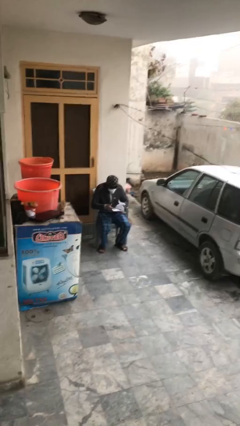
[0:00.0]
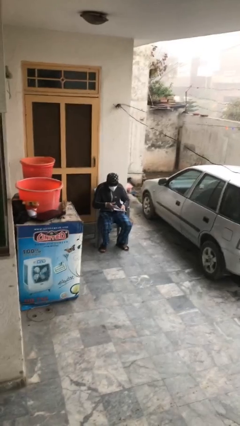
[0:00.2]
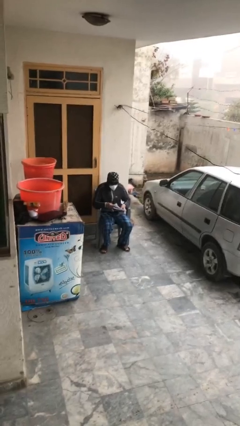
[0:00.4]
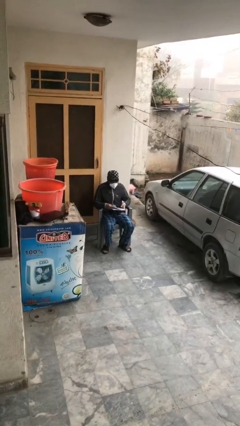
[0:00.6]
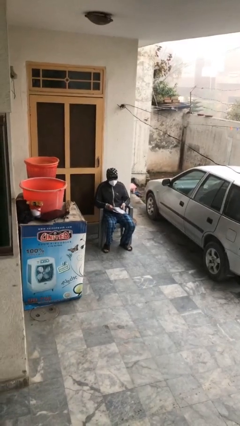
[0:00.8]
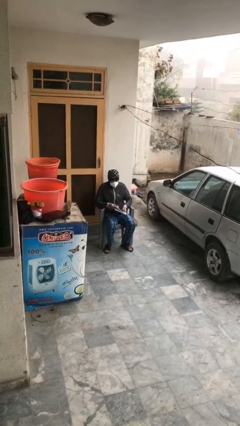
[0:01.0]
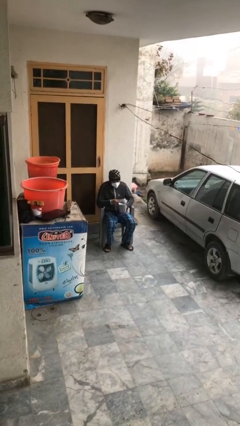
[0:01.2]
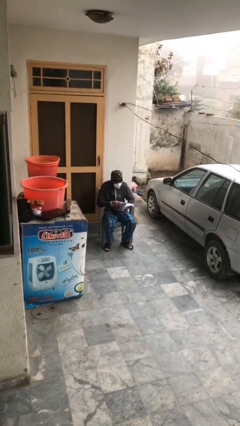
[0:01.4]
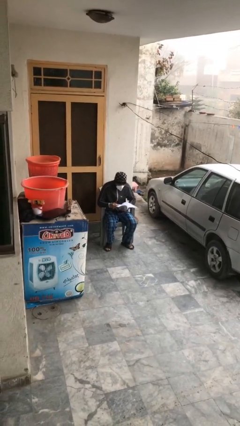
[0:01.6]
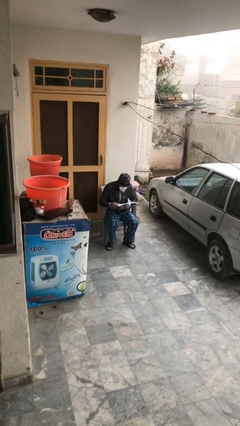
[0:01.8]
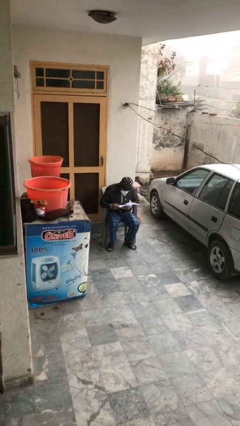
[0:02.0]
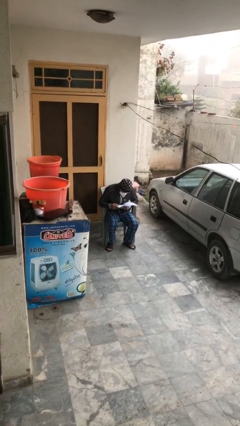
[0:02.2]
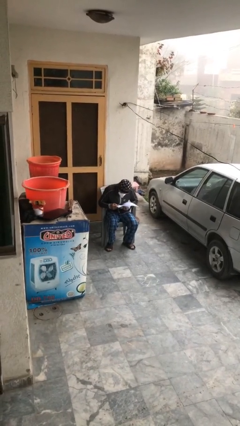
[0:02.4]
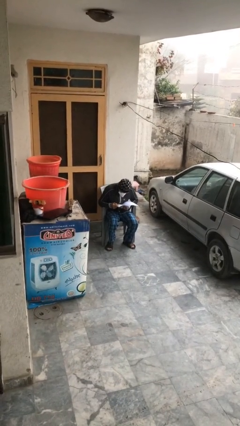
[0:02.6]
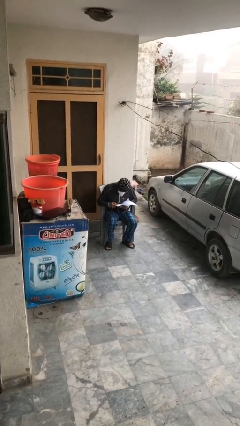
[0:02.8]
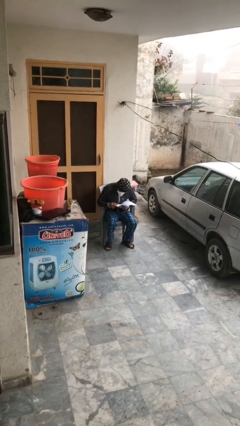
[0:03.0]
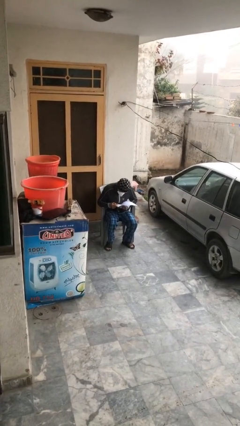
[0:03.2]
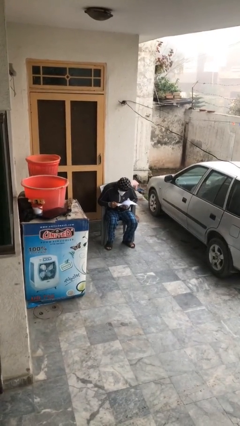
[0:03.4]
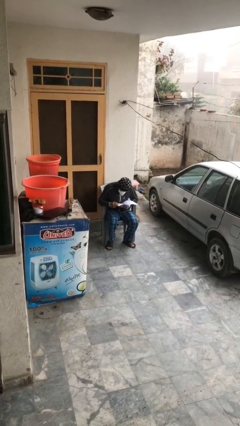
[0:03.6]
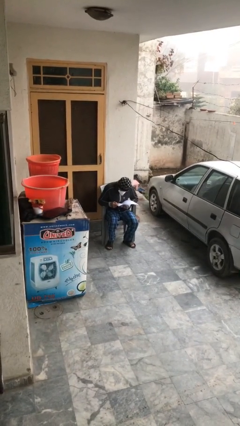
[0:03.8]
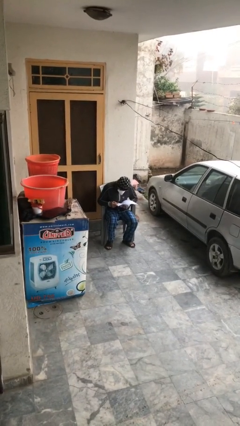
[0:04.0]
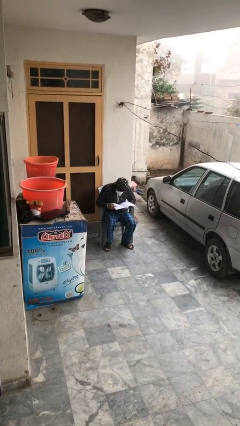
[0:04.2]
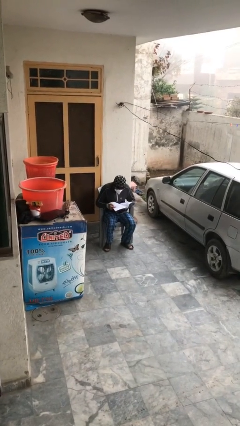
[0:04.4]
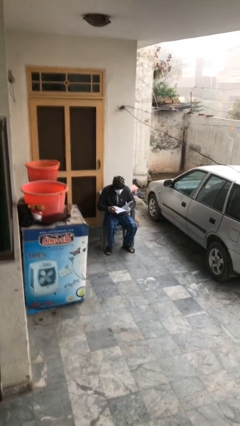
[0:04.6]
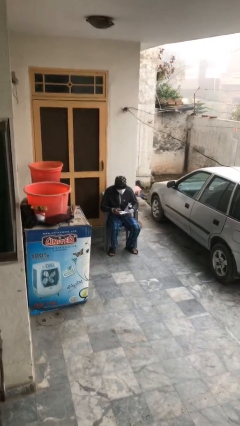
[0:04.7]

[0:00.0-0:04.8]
person reads document

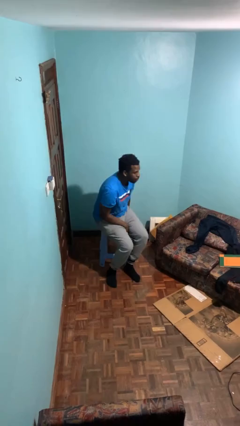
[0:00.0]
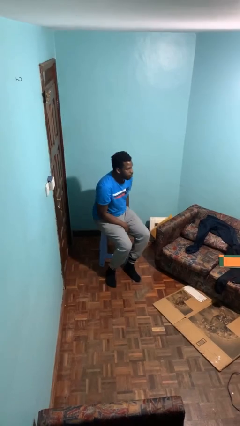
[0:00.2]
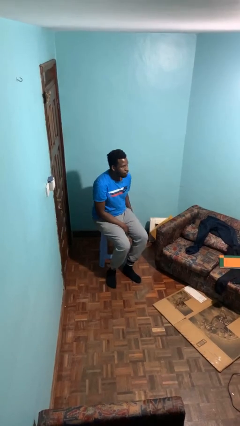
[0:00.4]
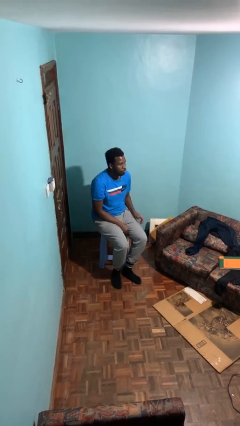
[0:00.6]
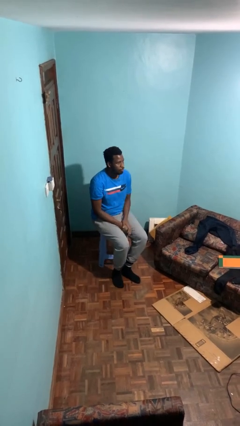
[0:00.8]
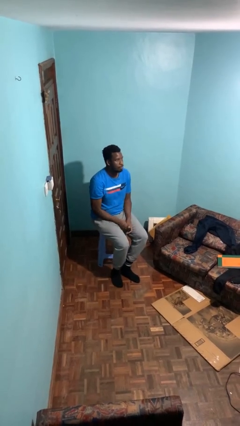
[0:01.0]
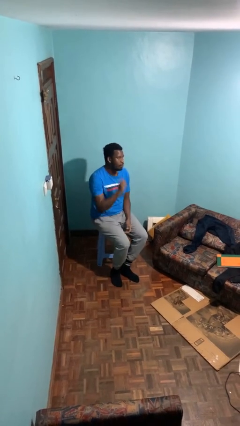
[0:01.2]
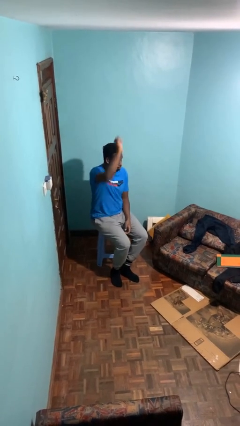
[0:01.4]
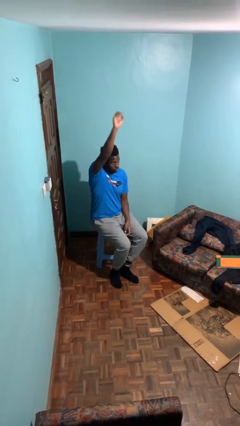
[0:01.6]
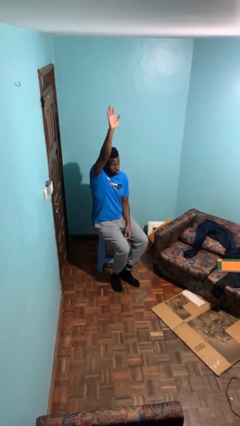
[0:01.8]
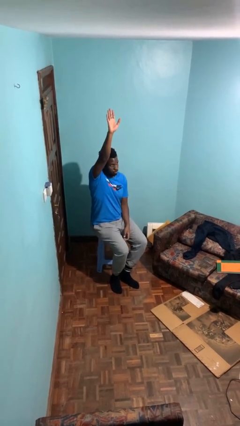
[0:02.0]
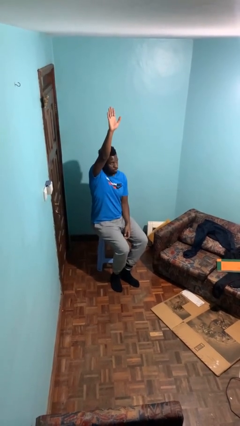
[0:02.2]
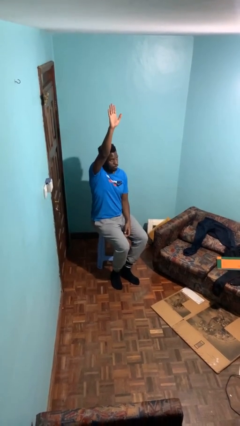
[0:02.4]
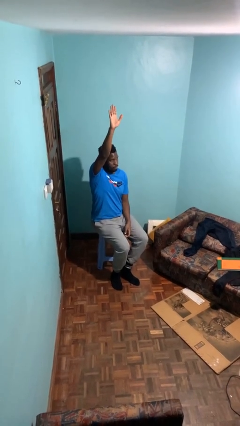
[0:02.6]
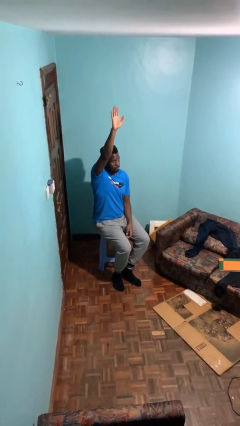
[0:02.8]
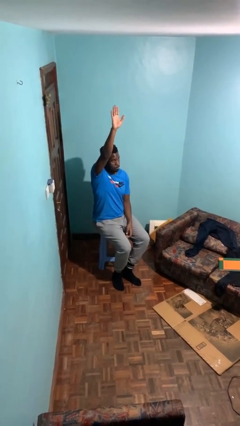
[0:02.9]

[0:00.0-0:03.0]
person gestures raise hand

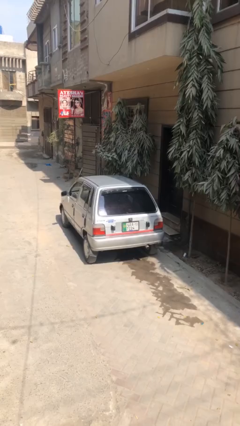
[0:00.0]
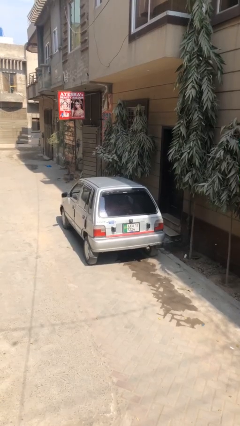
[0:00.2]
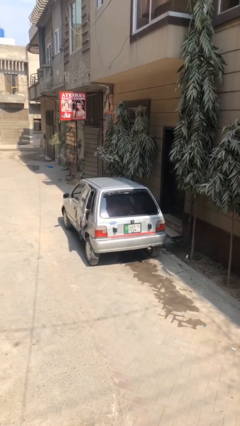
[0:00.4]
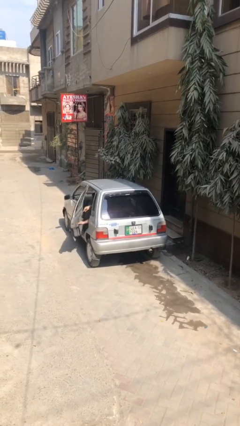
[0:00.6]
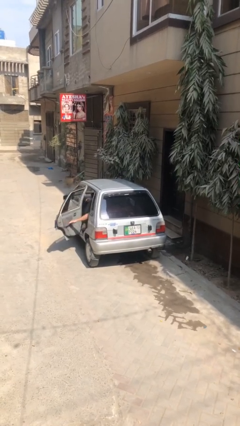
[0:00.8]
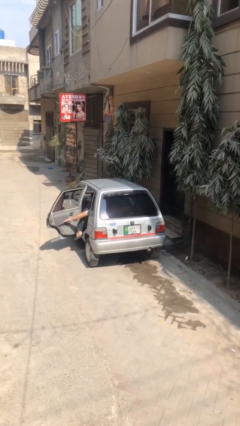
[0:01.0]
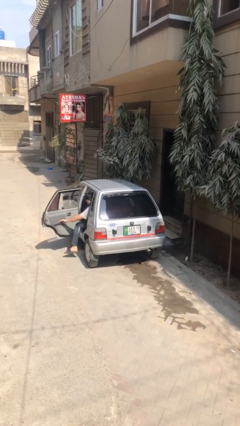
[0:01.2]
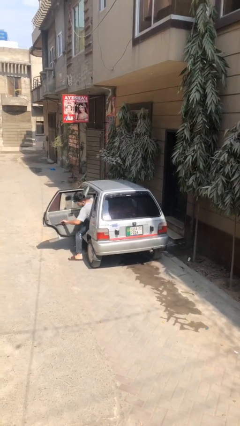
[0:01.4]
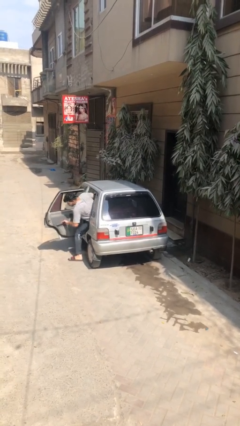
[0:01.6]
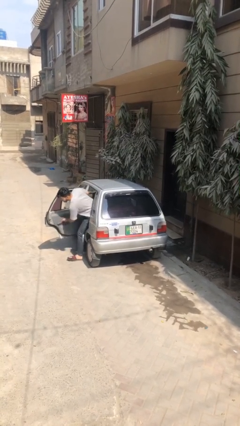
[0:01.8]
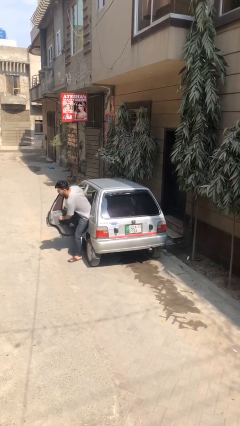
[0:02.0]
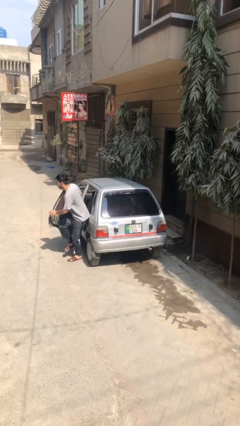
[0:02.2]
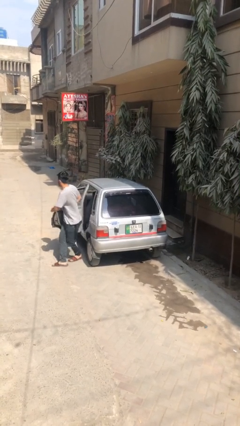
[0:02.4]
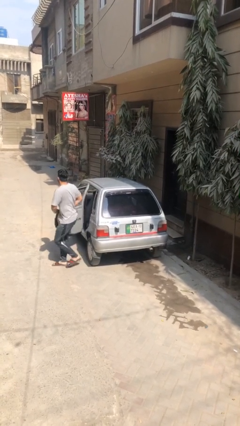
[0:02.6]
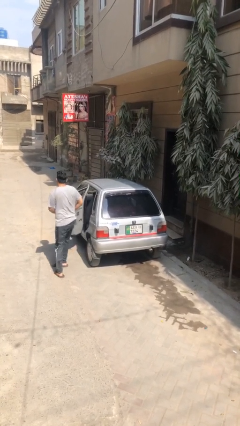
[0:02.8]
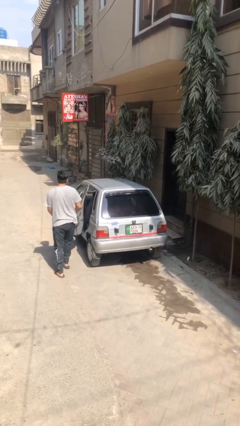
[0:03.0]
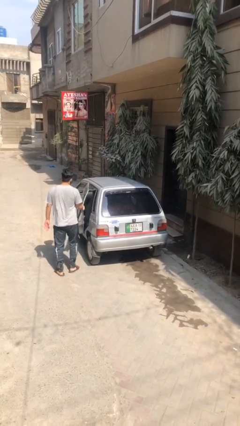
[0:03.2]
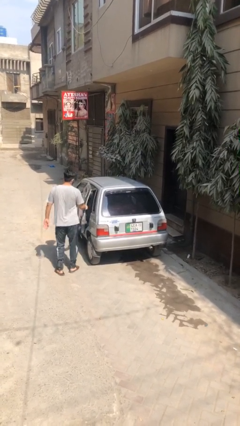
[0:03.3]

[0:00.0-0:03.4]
car drops off person

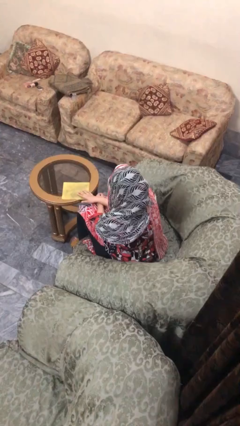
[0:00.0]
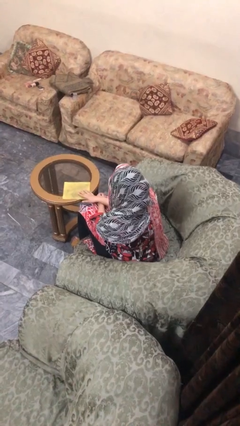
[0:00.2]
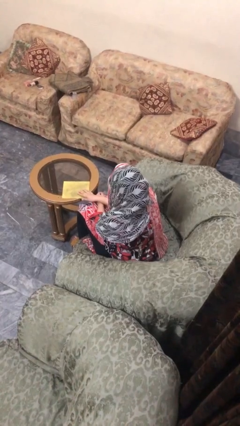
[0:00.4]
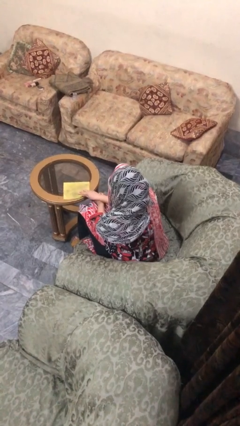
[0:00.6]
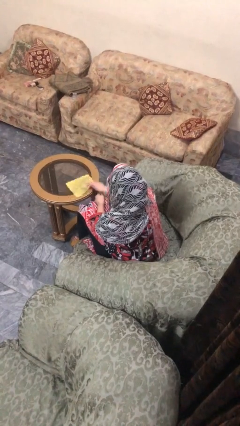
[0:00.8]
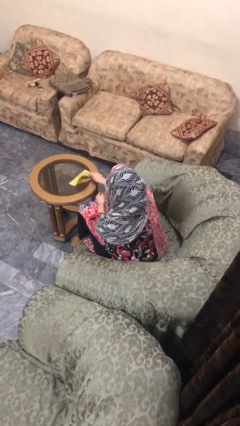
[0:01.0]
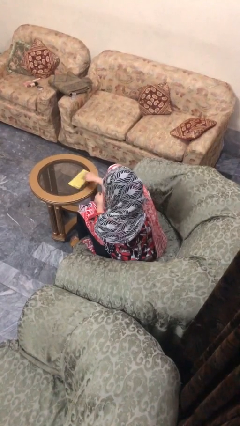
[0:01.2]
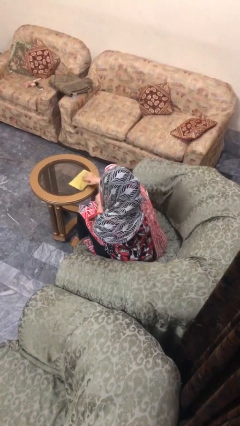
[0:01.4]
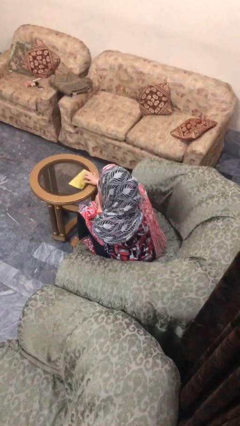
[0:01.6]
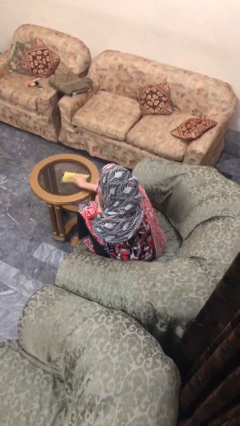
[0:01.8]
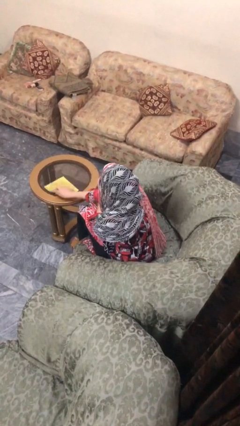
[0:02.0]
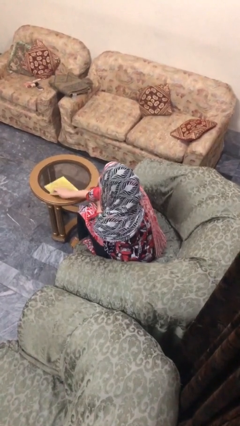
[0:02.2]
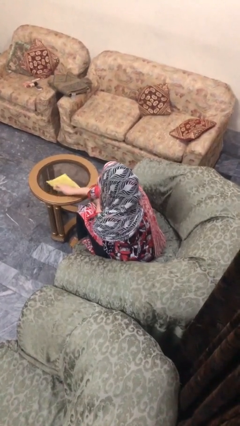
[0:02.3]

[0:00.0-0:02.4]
person cleans table with rag

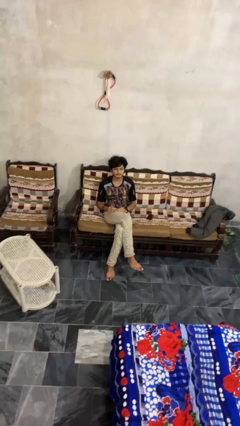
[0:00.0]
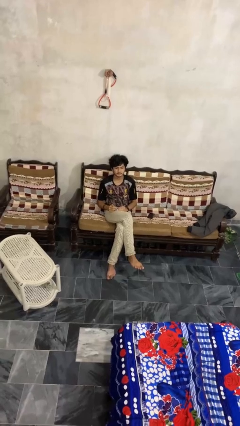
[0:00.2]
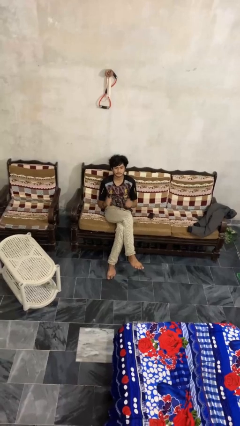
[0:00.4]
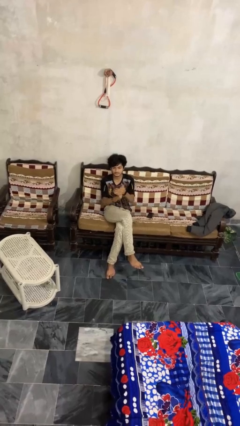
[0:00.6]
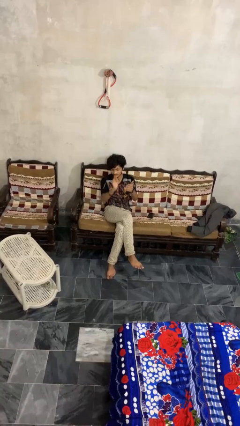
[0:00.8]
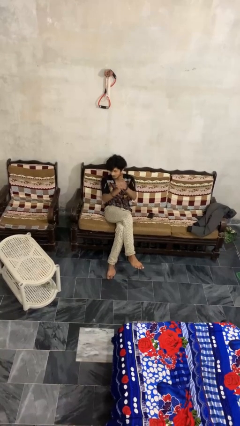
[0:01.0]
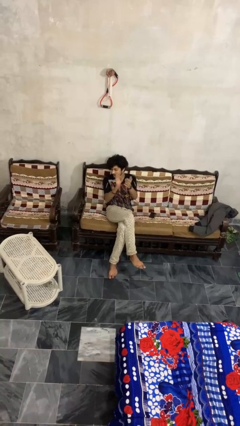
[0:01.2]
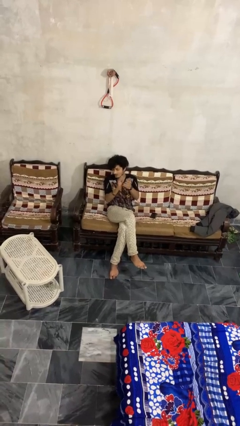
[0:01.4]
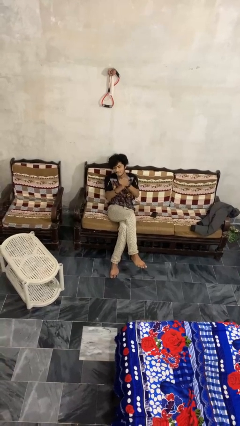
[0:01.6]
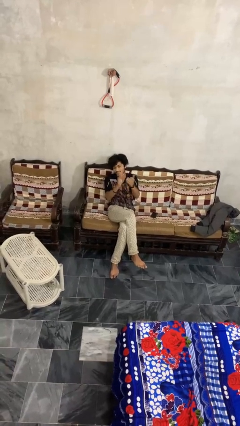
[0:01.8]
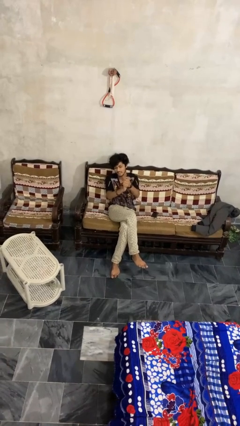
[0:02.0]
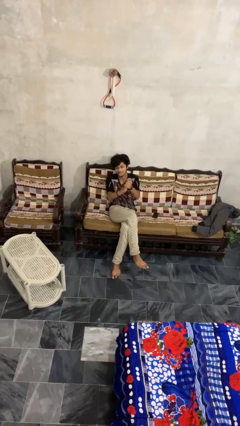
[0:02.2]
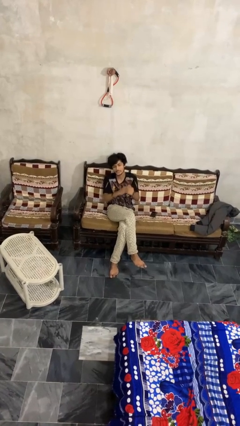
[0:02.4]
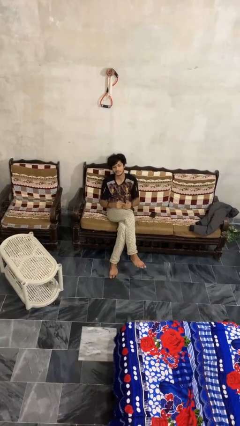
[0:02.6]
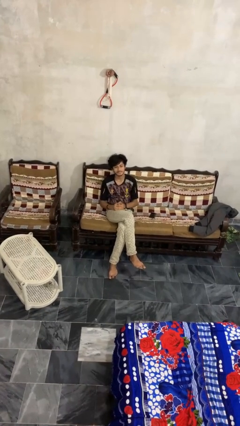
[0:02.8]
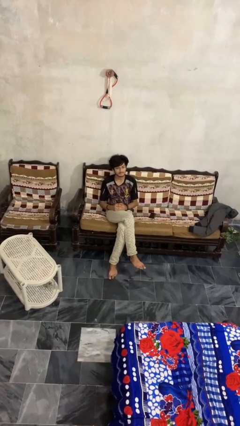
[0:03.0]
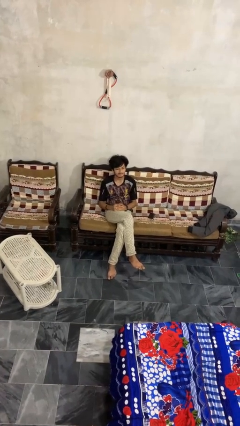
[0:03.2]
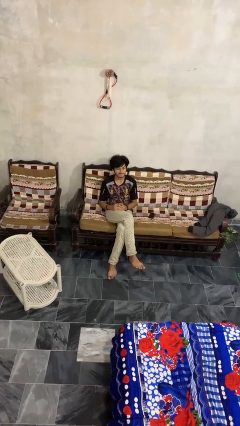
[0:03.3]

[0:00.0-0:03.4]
person claps hands

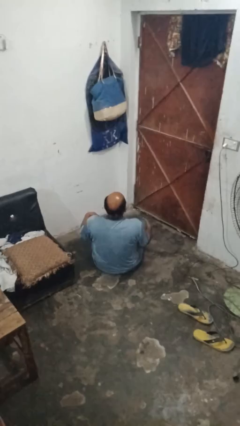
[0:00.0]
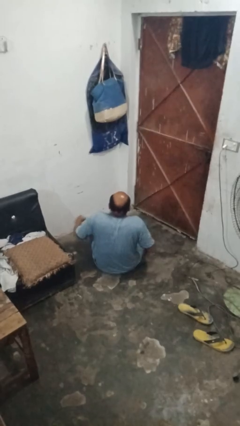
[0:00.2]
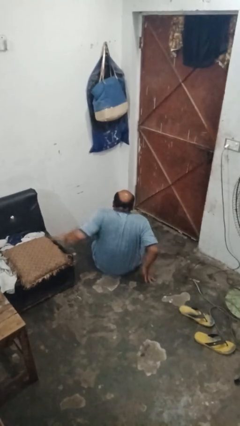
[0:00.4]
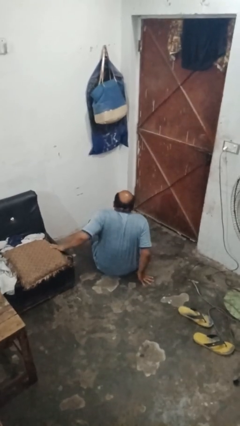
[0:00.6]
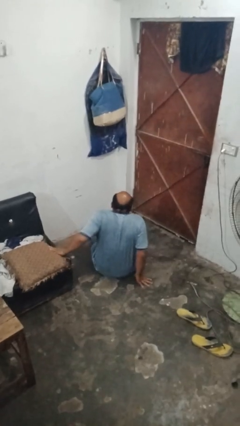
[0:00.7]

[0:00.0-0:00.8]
person stands up from floor
